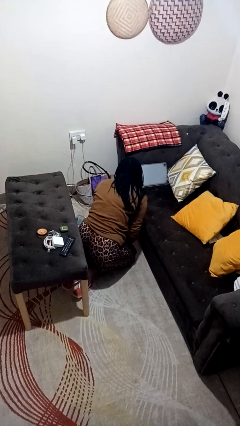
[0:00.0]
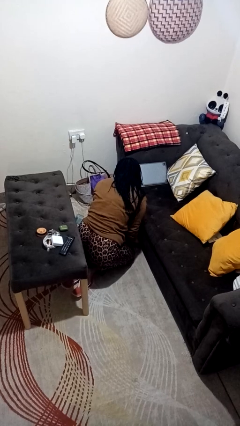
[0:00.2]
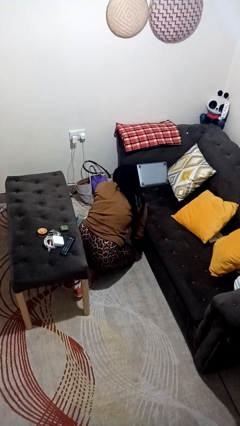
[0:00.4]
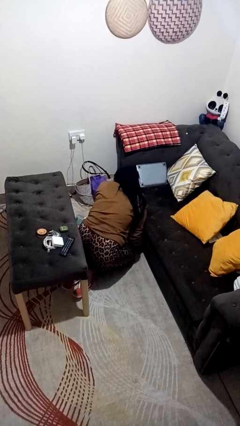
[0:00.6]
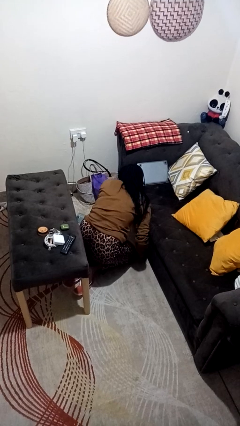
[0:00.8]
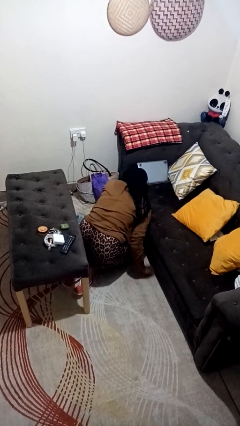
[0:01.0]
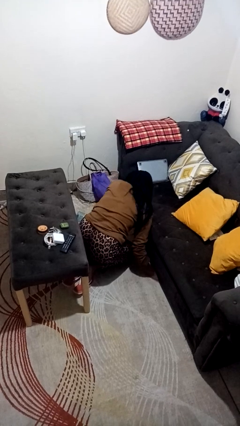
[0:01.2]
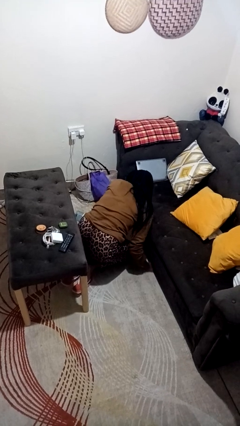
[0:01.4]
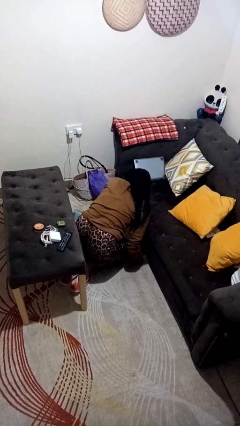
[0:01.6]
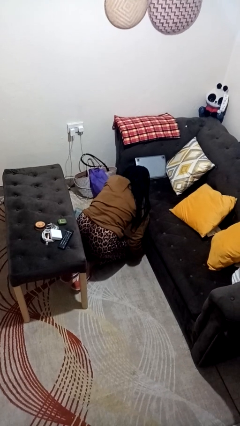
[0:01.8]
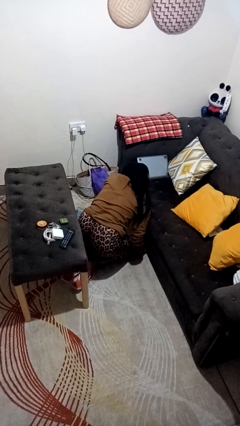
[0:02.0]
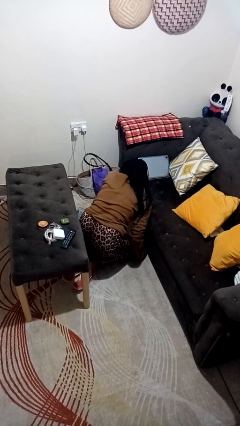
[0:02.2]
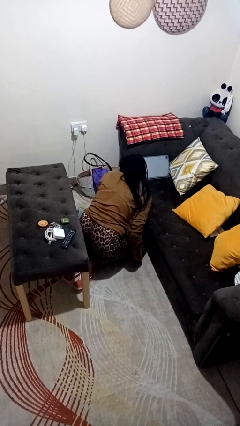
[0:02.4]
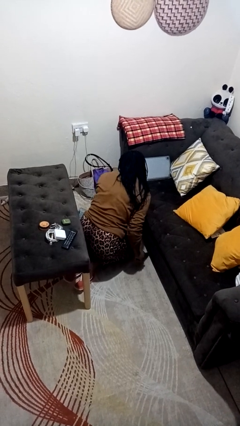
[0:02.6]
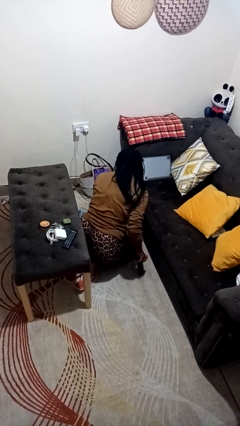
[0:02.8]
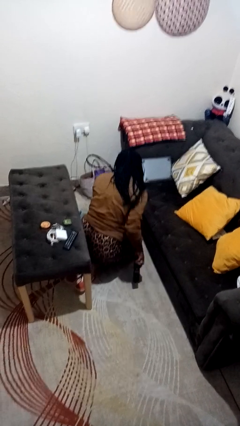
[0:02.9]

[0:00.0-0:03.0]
person searches under couch

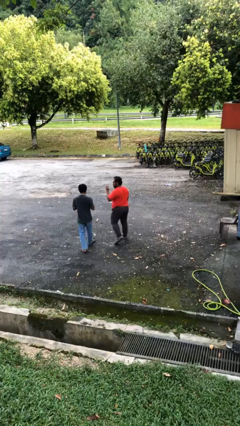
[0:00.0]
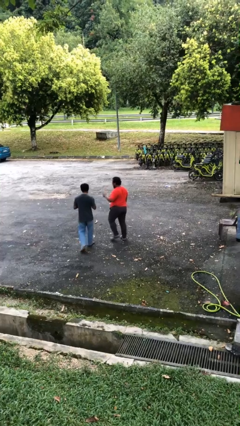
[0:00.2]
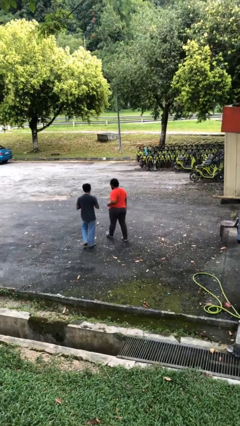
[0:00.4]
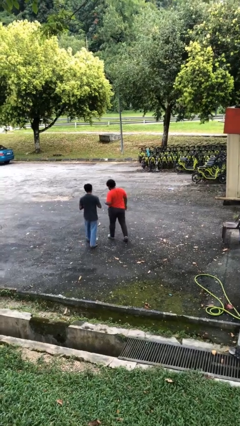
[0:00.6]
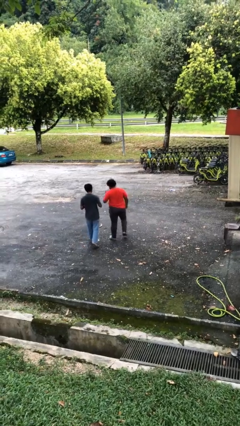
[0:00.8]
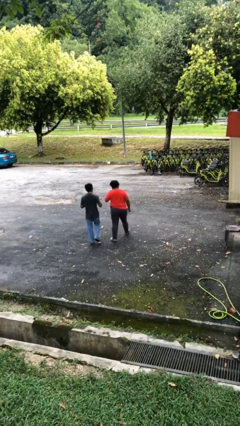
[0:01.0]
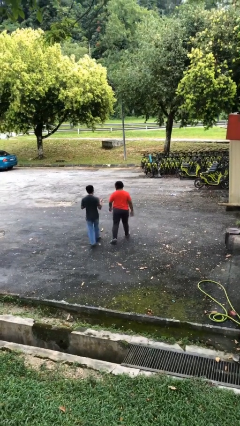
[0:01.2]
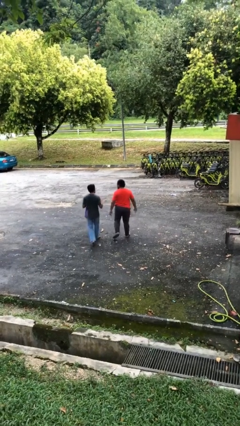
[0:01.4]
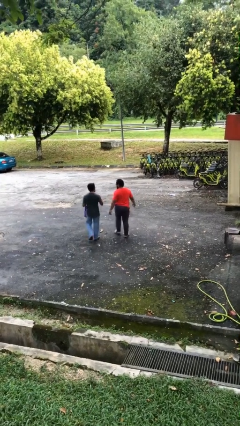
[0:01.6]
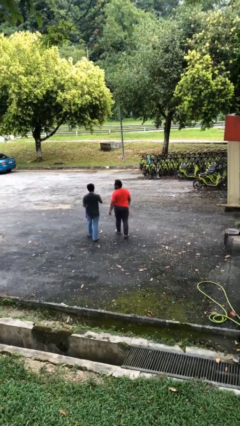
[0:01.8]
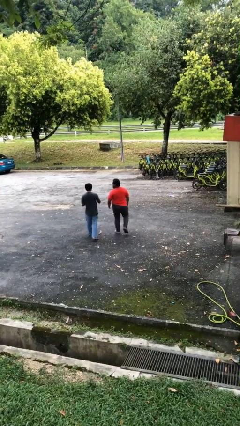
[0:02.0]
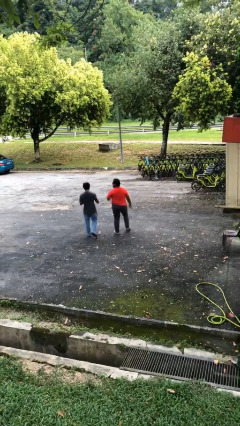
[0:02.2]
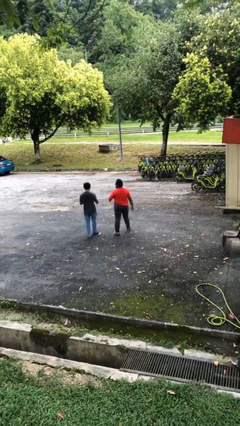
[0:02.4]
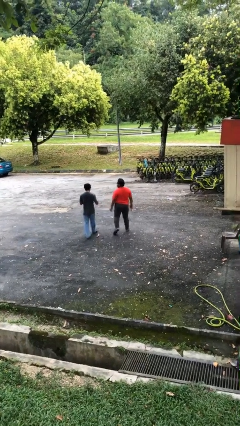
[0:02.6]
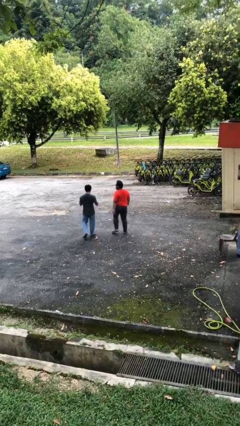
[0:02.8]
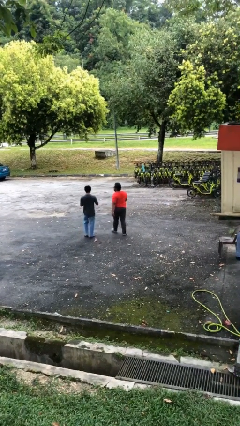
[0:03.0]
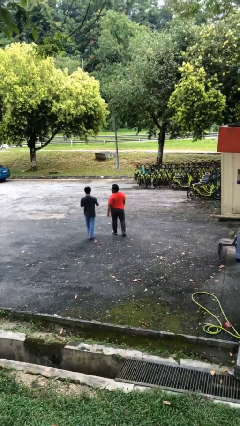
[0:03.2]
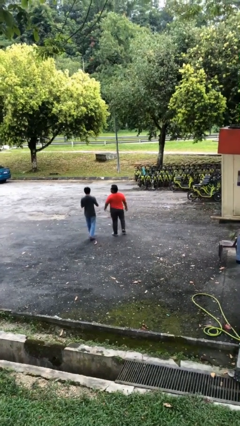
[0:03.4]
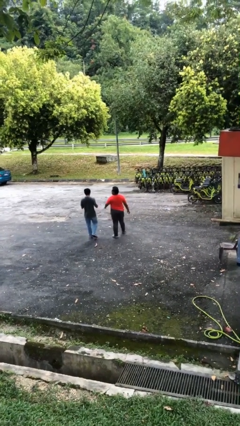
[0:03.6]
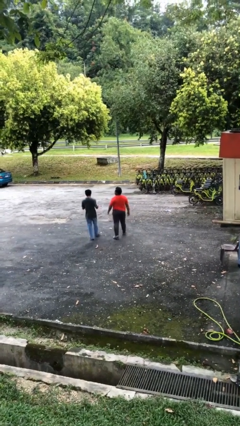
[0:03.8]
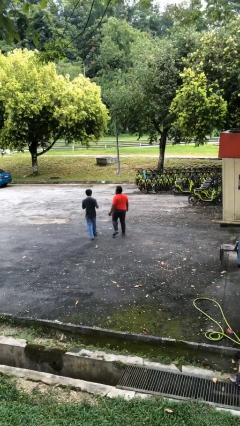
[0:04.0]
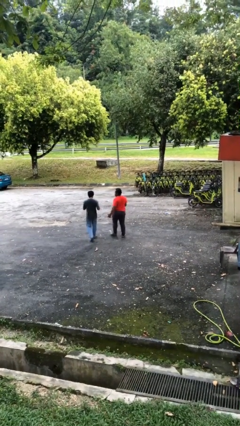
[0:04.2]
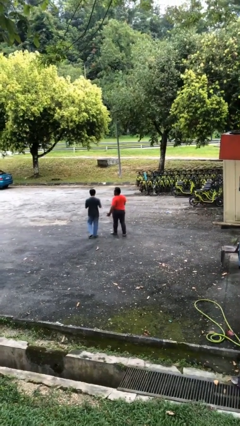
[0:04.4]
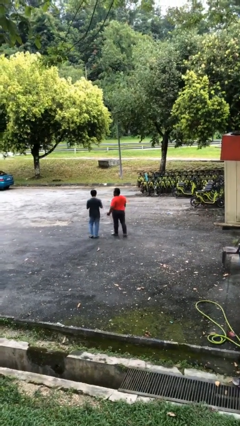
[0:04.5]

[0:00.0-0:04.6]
person talks to person

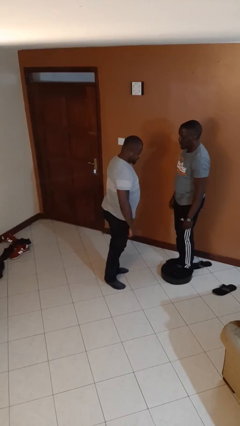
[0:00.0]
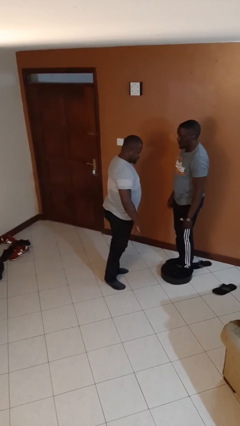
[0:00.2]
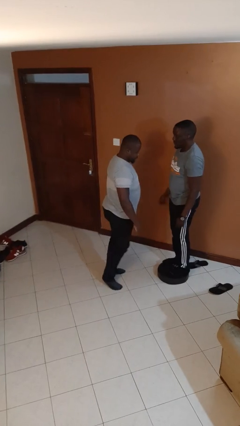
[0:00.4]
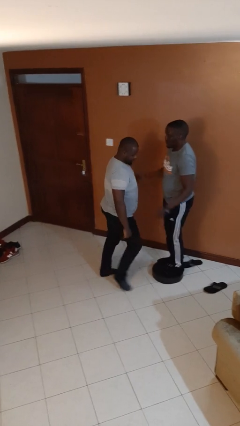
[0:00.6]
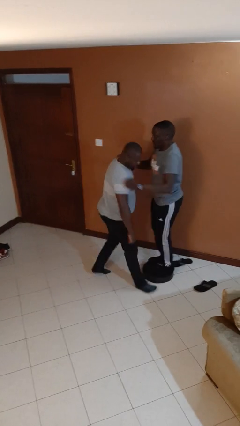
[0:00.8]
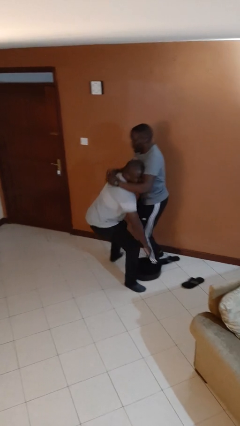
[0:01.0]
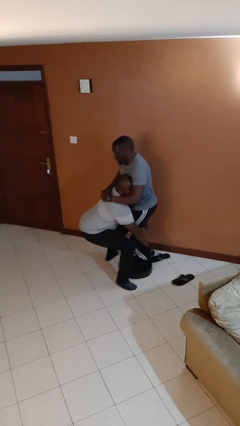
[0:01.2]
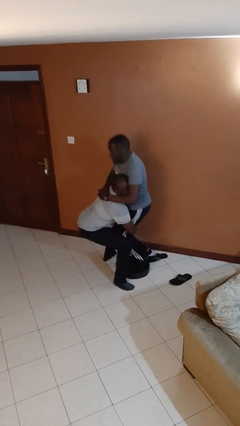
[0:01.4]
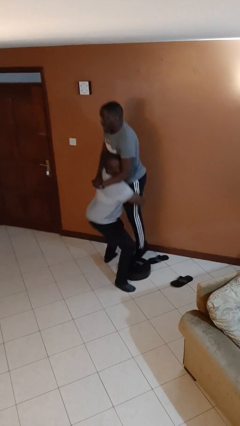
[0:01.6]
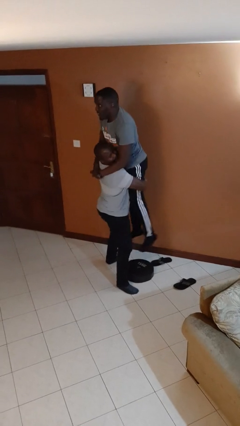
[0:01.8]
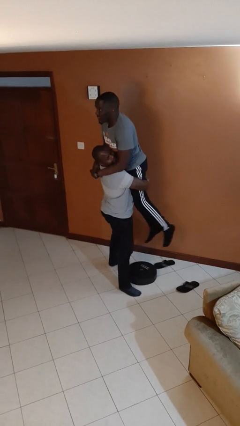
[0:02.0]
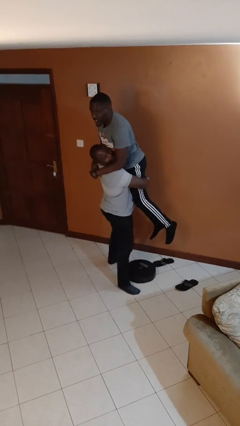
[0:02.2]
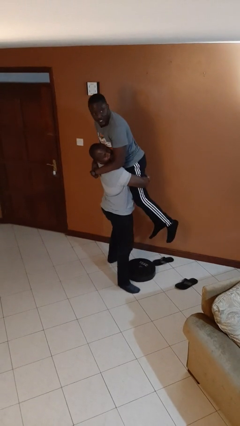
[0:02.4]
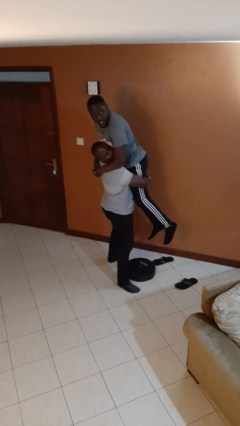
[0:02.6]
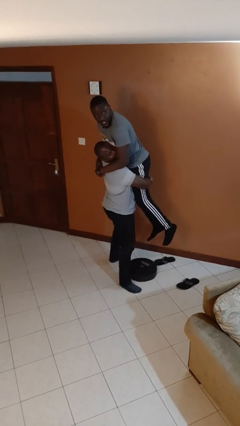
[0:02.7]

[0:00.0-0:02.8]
person picks up person

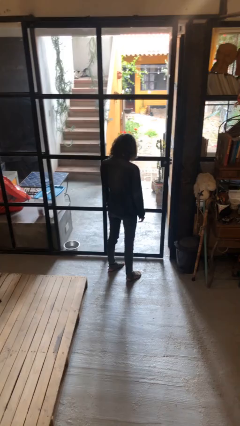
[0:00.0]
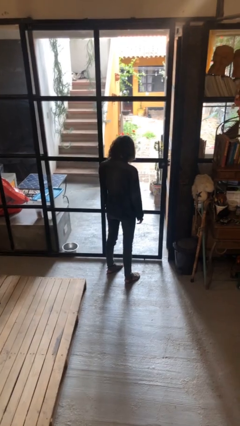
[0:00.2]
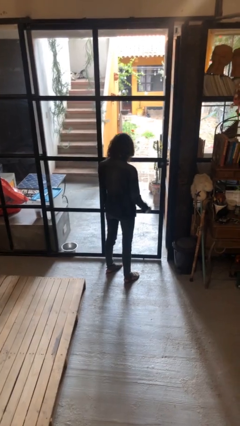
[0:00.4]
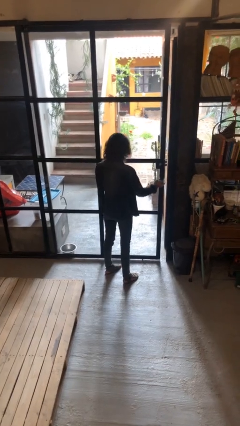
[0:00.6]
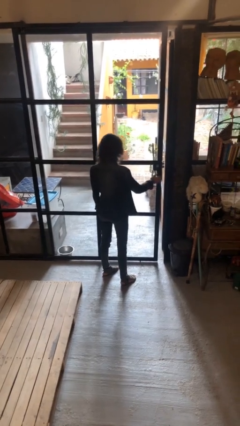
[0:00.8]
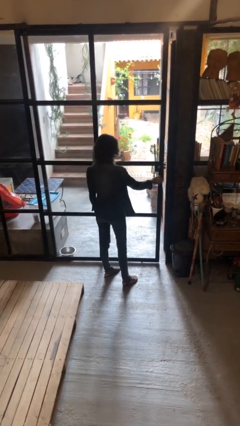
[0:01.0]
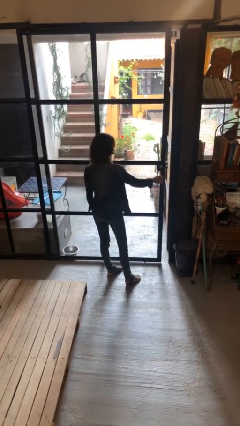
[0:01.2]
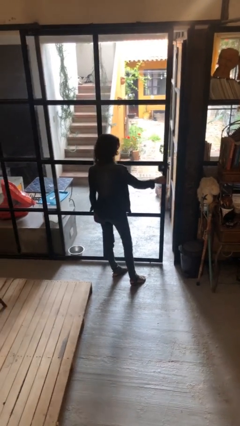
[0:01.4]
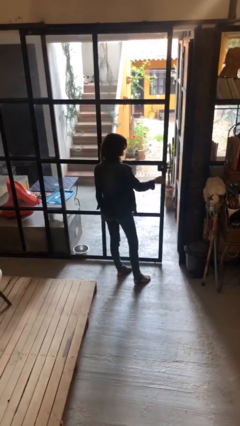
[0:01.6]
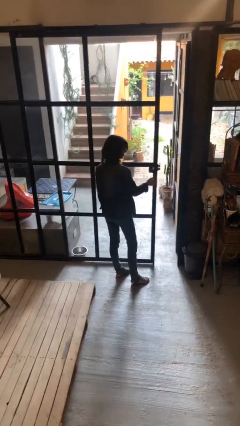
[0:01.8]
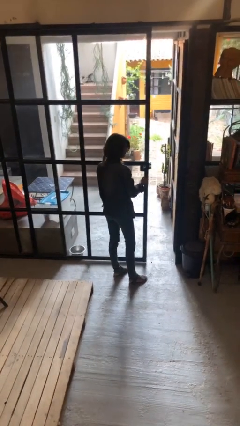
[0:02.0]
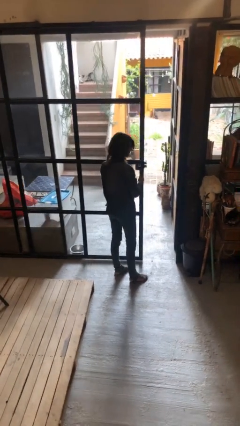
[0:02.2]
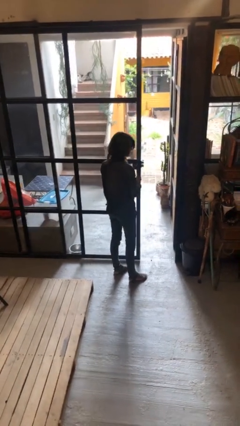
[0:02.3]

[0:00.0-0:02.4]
person opens sliding door

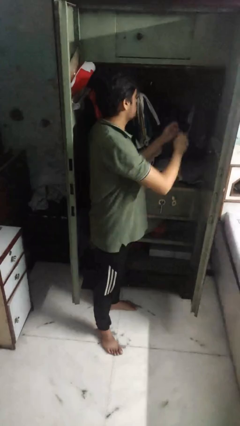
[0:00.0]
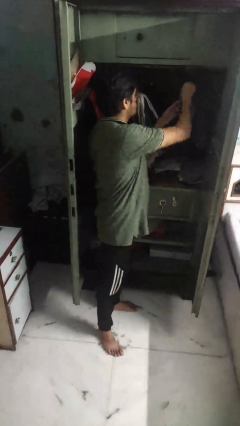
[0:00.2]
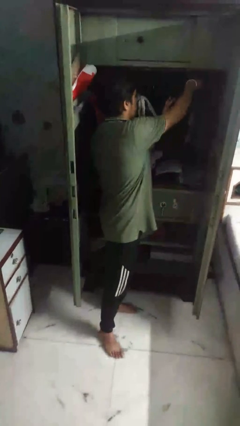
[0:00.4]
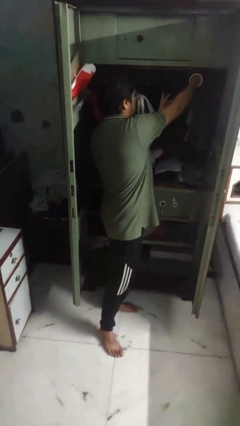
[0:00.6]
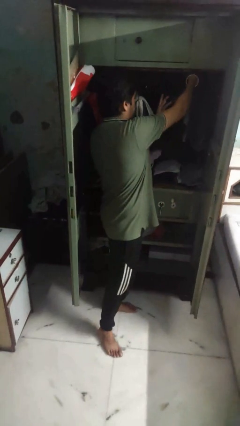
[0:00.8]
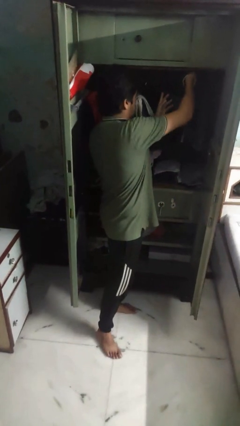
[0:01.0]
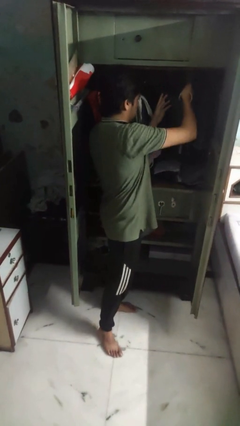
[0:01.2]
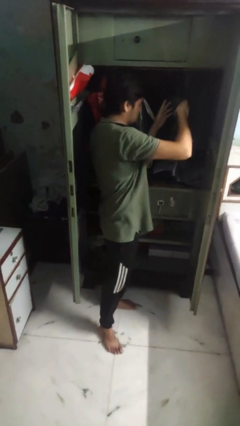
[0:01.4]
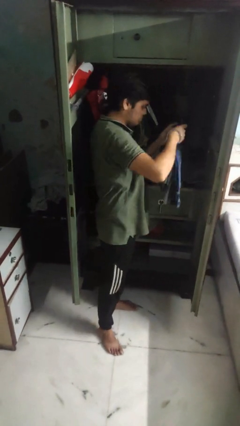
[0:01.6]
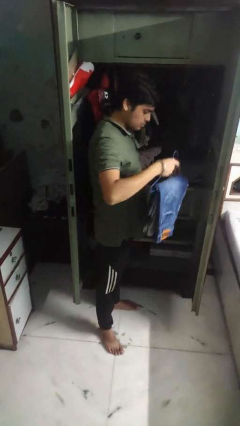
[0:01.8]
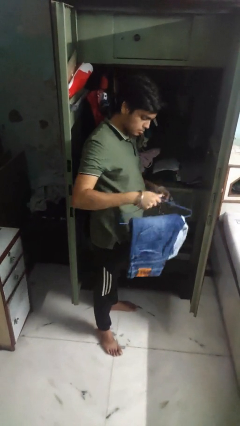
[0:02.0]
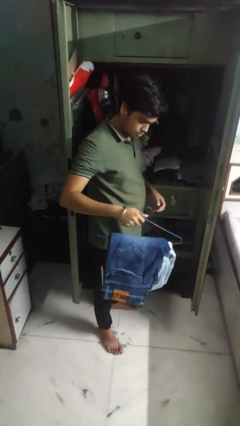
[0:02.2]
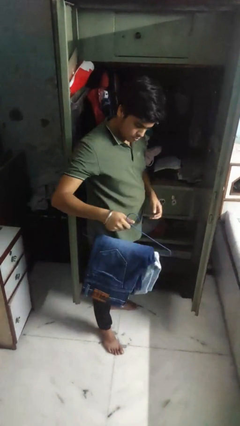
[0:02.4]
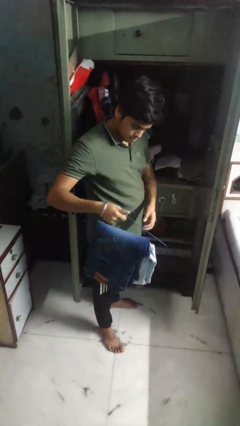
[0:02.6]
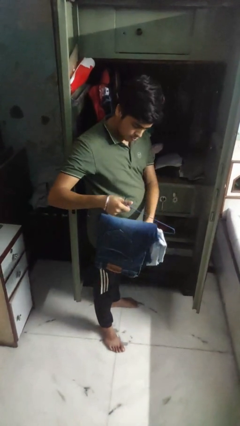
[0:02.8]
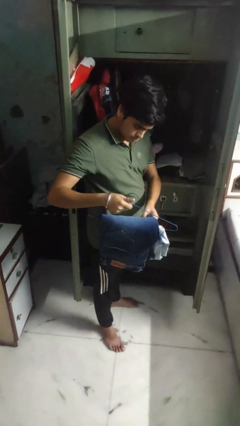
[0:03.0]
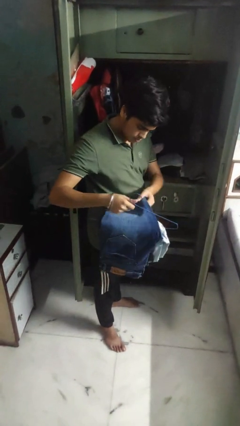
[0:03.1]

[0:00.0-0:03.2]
person takes clothes from closet

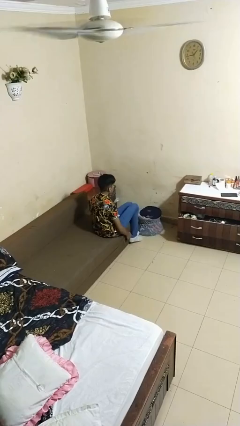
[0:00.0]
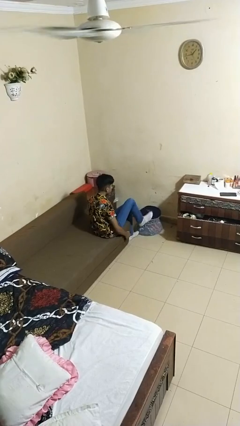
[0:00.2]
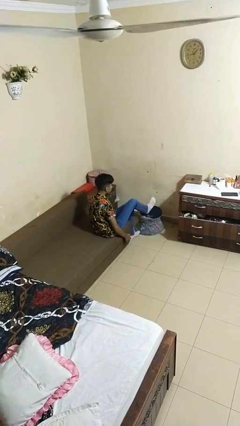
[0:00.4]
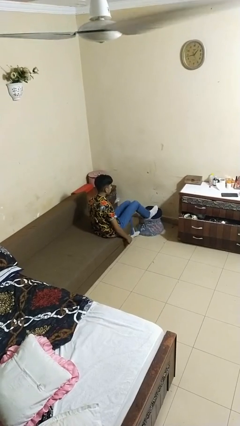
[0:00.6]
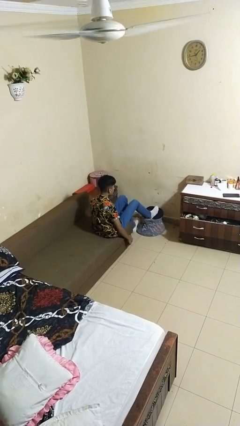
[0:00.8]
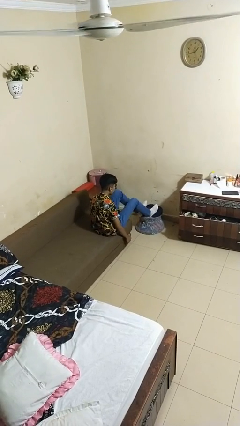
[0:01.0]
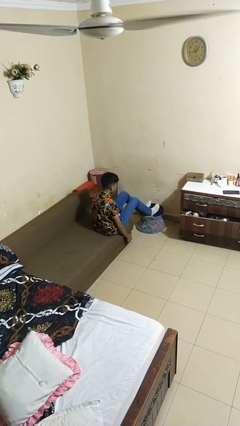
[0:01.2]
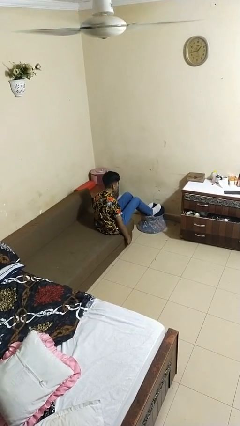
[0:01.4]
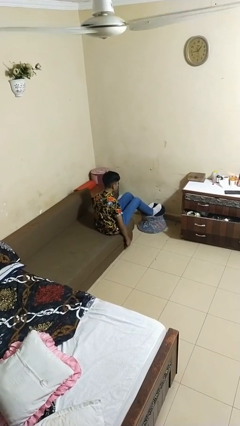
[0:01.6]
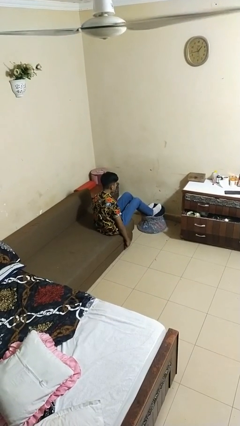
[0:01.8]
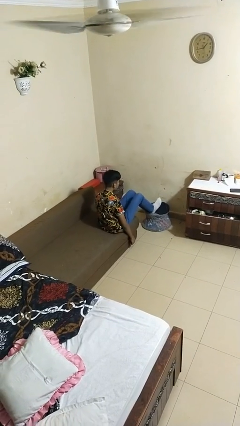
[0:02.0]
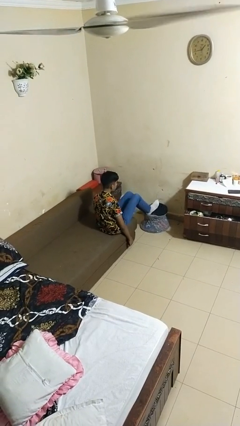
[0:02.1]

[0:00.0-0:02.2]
person puts feet up
